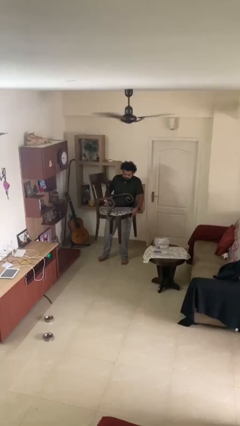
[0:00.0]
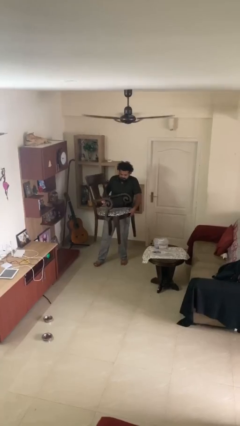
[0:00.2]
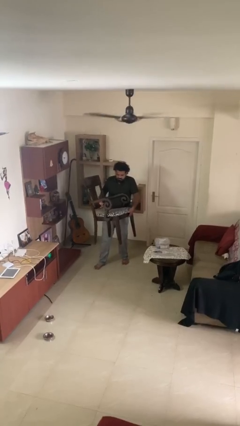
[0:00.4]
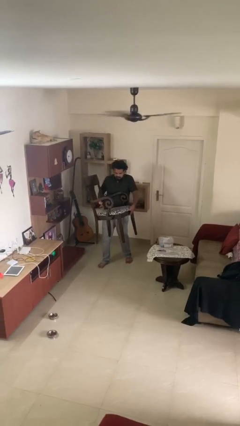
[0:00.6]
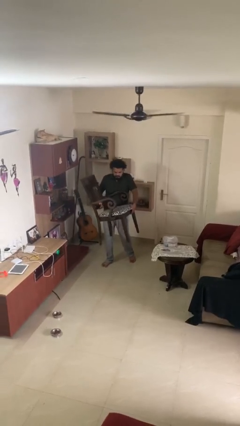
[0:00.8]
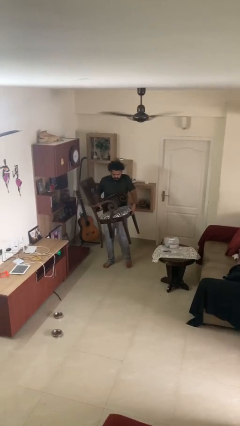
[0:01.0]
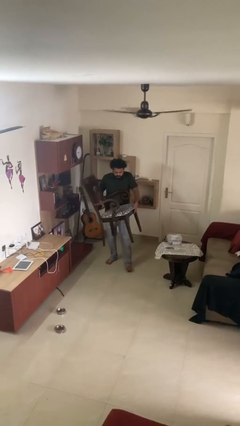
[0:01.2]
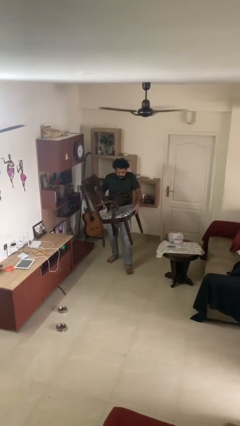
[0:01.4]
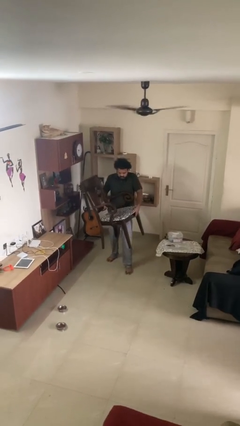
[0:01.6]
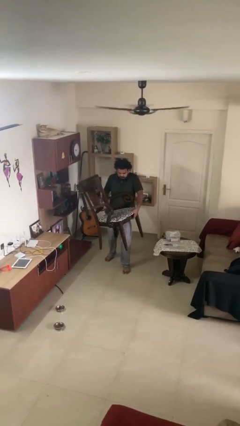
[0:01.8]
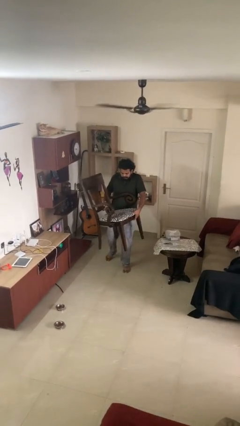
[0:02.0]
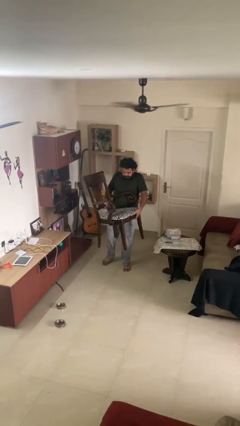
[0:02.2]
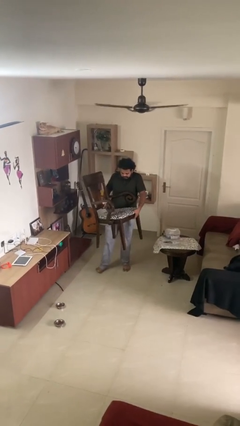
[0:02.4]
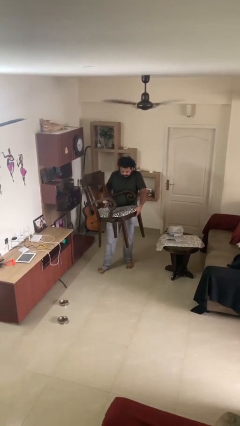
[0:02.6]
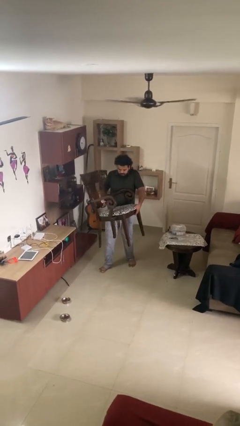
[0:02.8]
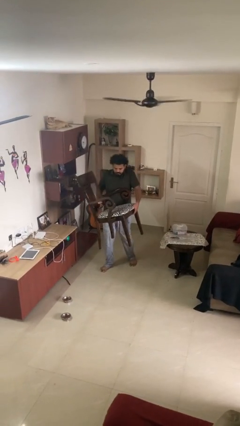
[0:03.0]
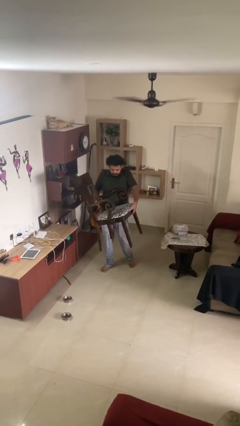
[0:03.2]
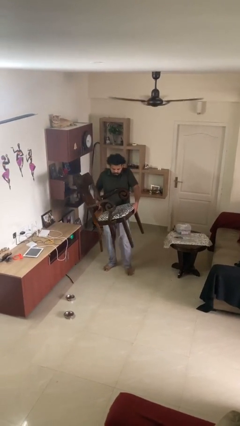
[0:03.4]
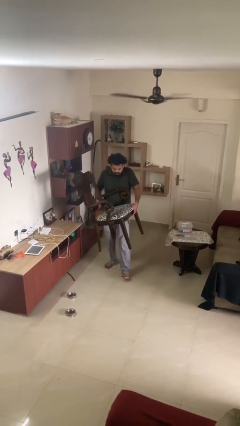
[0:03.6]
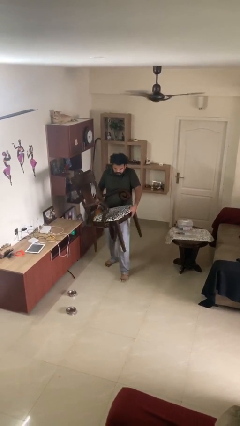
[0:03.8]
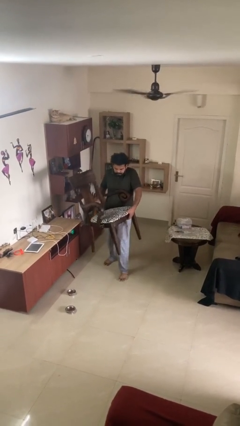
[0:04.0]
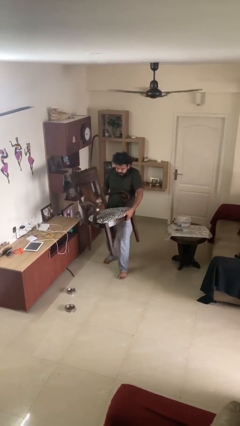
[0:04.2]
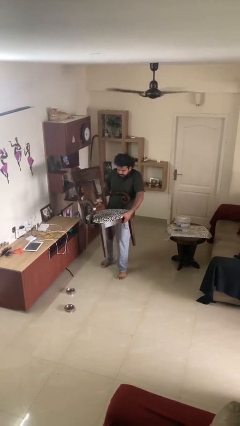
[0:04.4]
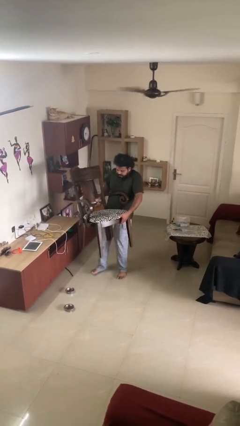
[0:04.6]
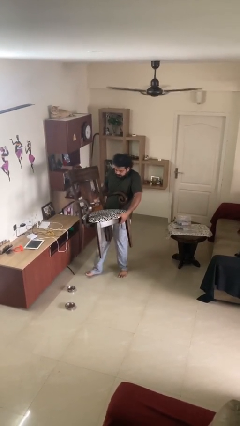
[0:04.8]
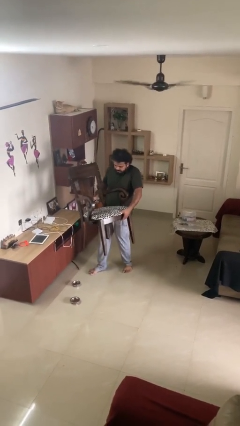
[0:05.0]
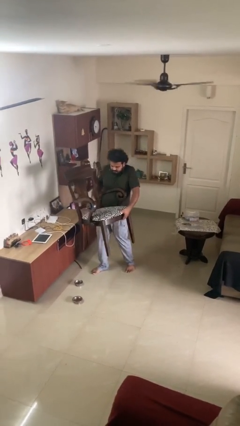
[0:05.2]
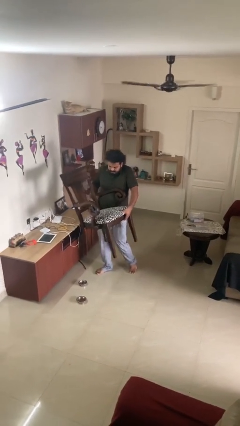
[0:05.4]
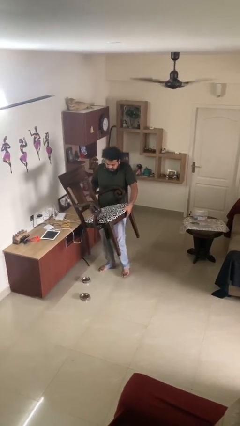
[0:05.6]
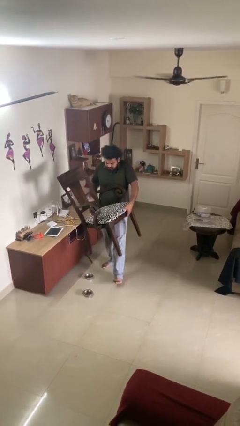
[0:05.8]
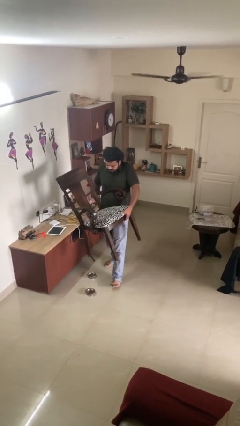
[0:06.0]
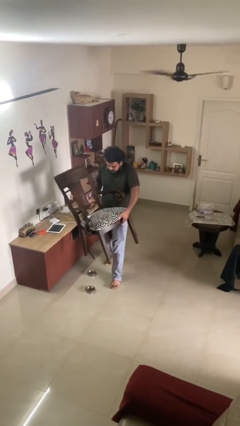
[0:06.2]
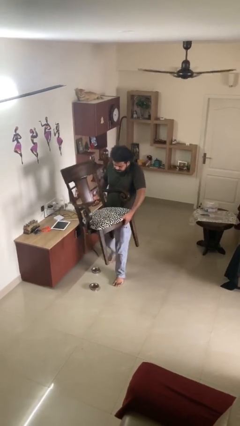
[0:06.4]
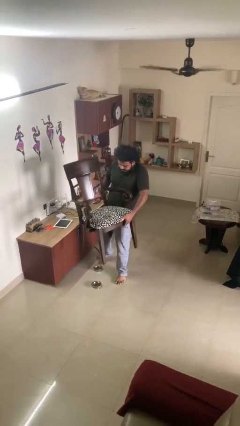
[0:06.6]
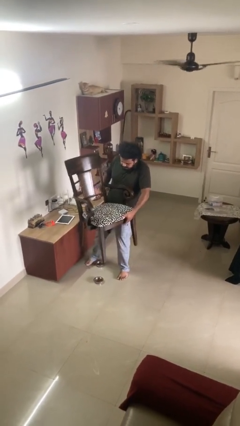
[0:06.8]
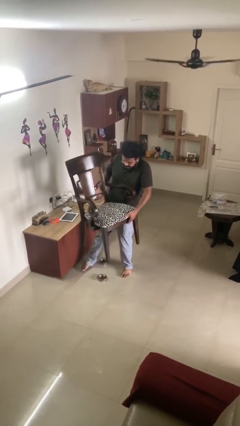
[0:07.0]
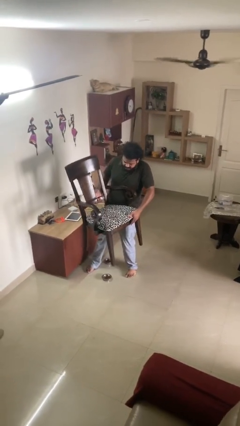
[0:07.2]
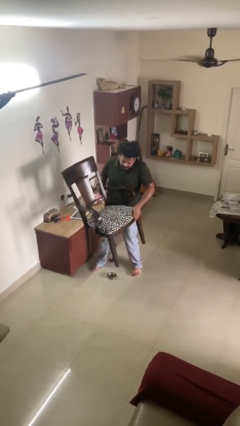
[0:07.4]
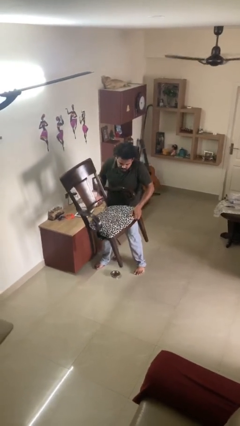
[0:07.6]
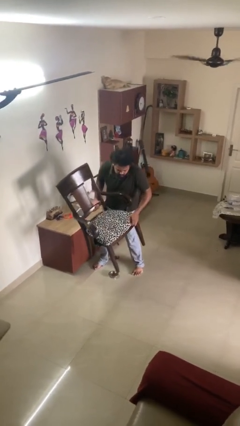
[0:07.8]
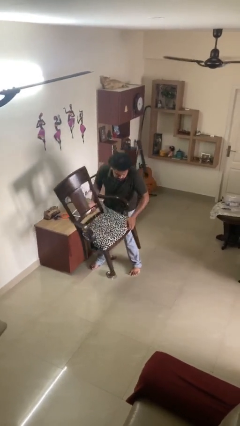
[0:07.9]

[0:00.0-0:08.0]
person carries heavy object

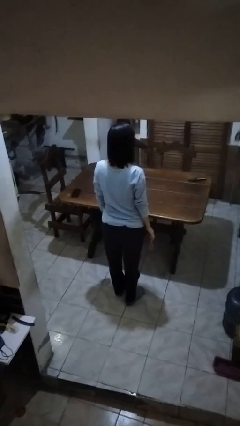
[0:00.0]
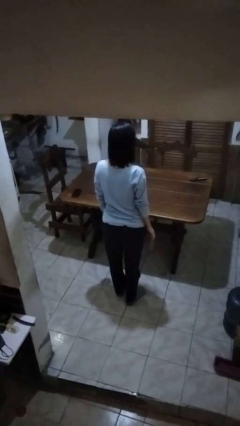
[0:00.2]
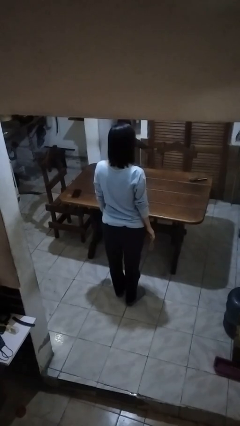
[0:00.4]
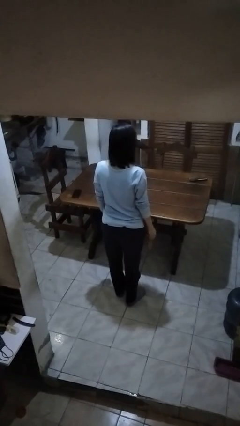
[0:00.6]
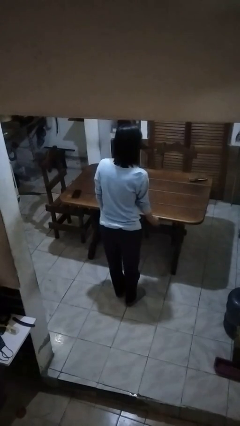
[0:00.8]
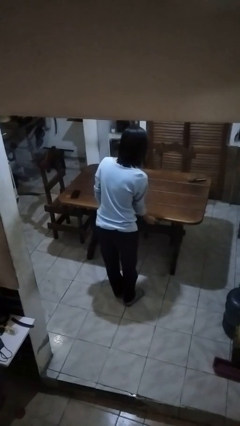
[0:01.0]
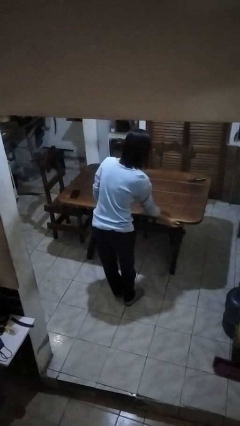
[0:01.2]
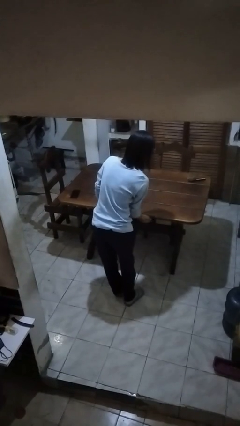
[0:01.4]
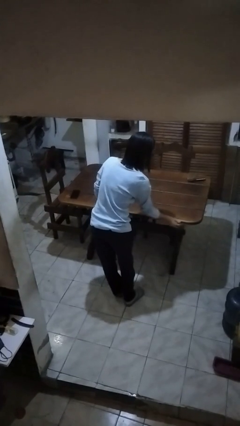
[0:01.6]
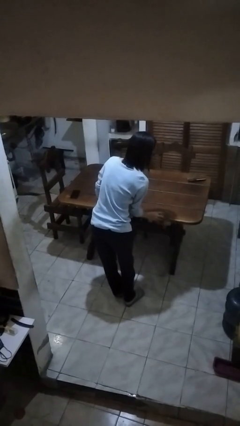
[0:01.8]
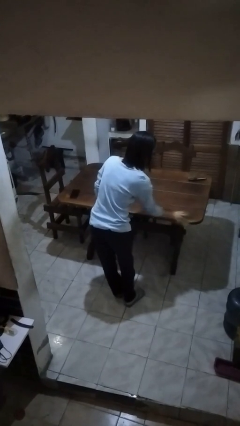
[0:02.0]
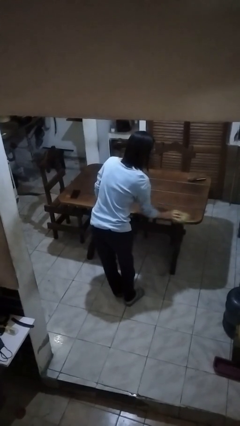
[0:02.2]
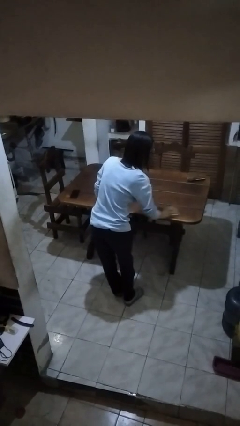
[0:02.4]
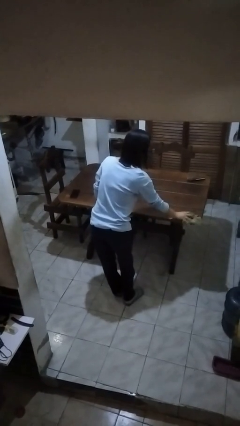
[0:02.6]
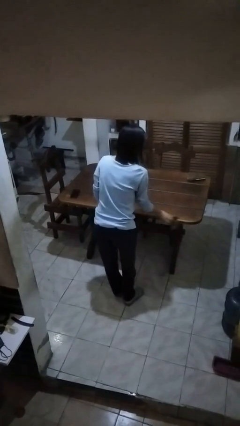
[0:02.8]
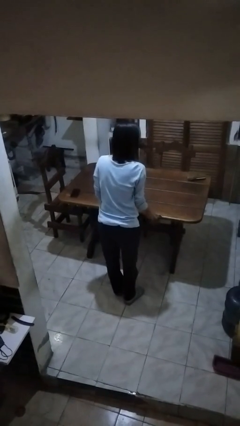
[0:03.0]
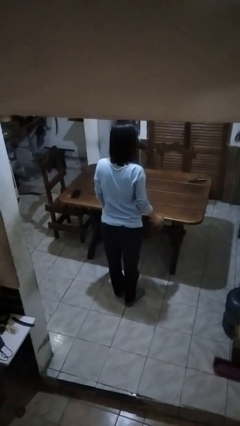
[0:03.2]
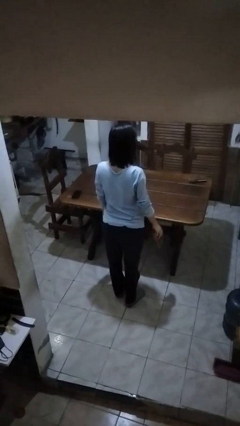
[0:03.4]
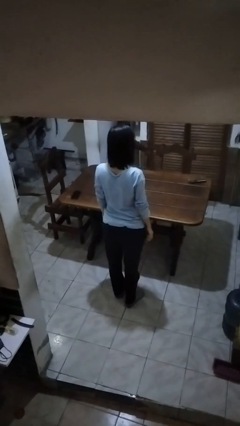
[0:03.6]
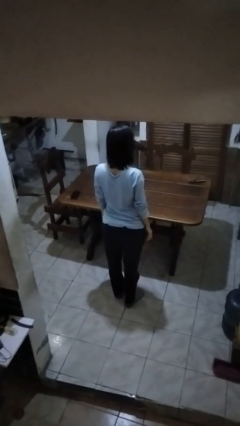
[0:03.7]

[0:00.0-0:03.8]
person cleans table with rag

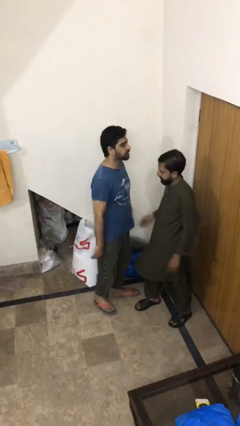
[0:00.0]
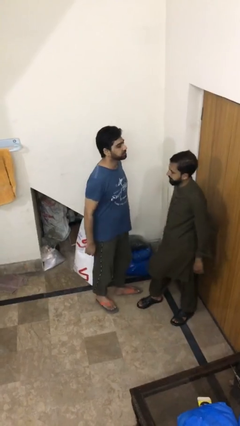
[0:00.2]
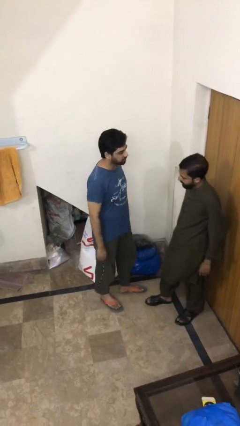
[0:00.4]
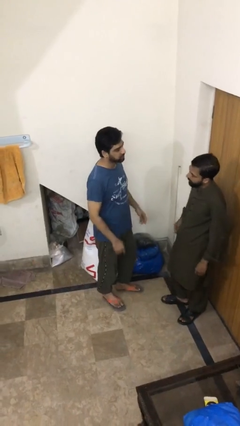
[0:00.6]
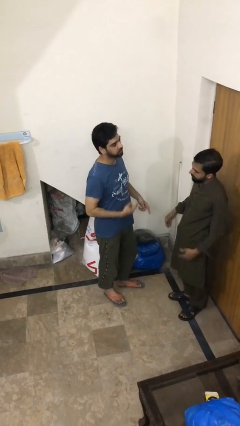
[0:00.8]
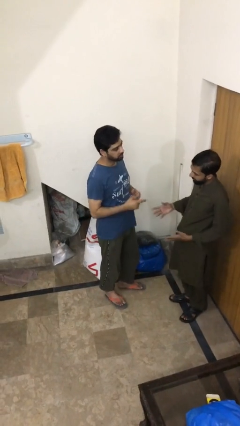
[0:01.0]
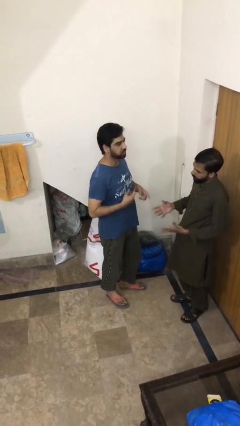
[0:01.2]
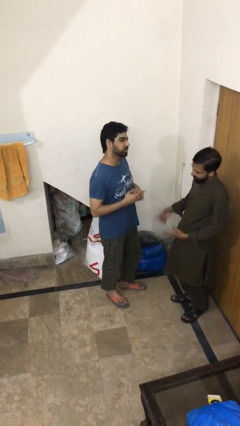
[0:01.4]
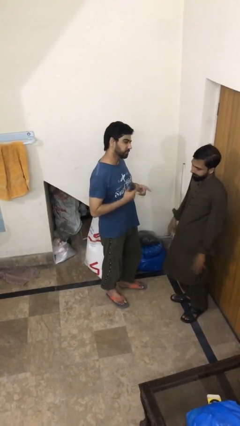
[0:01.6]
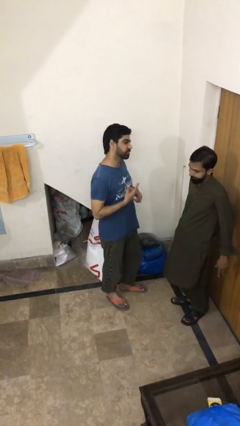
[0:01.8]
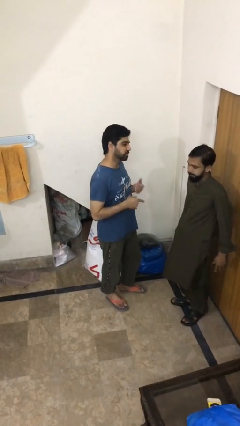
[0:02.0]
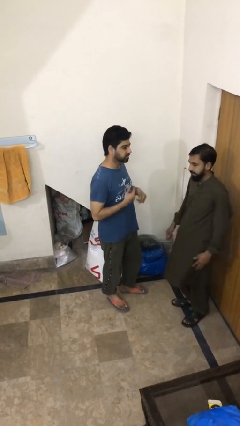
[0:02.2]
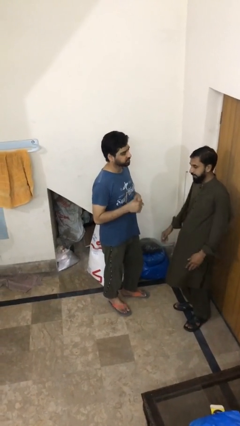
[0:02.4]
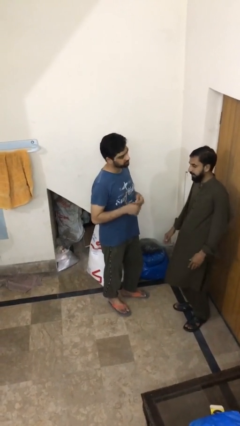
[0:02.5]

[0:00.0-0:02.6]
person talks to person

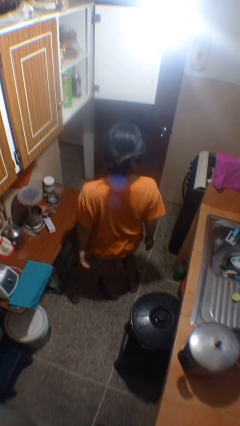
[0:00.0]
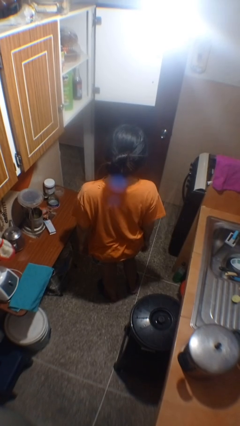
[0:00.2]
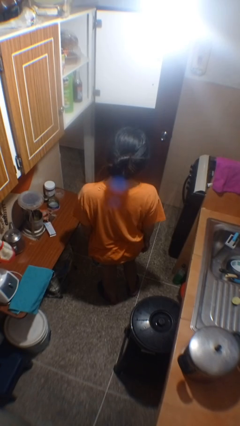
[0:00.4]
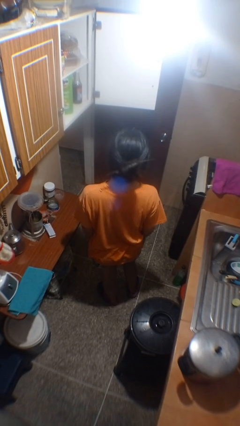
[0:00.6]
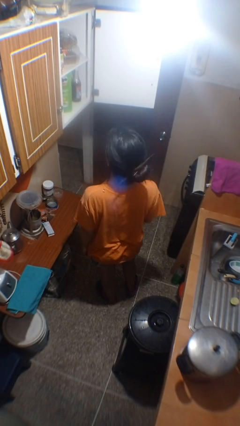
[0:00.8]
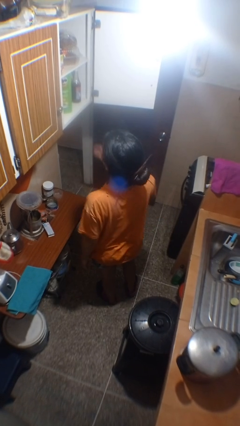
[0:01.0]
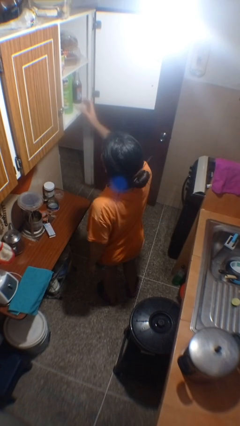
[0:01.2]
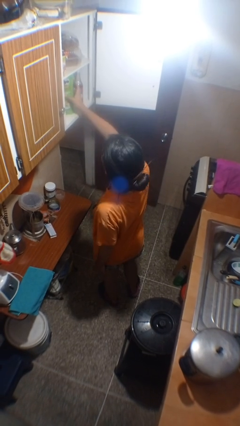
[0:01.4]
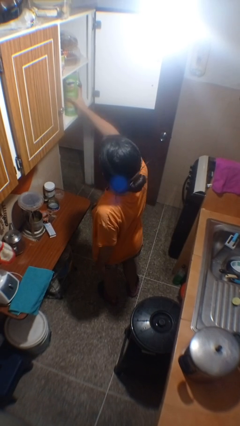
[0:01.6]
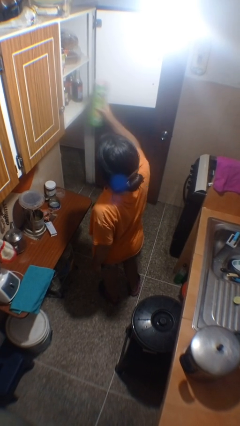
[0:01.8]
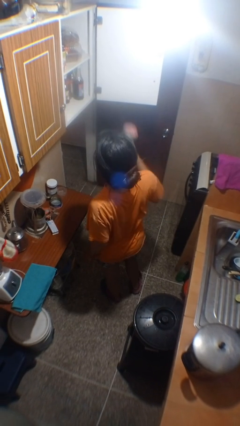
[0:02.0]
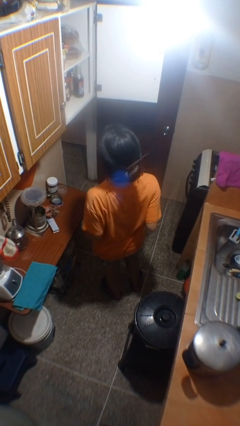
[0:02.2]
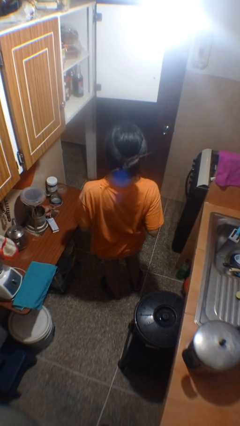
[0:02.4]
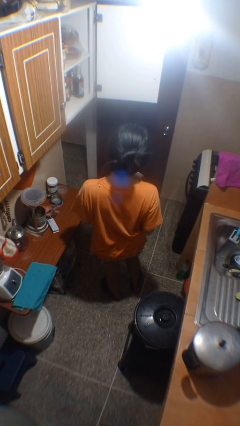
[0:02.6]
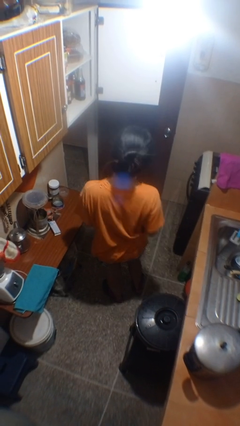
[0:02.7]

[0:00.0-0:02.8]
person takes object from cabinet
